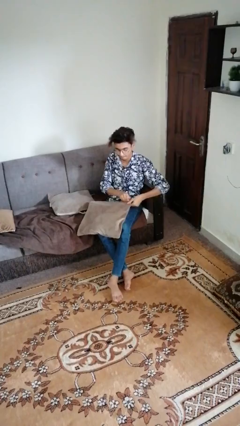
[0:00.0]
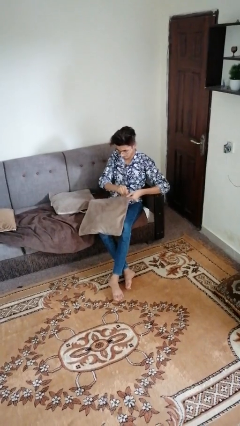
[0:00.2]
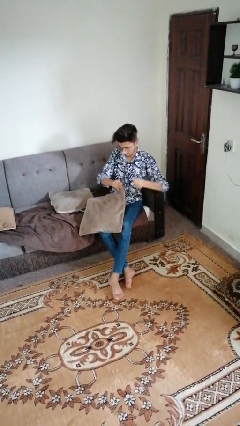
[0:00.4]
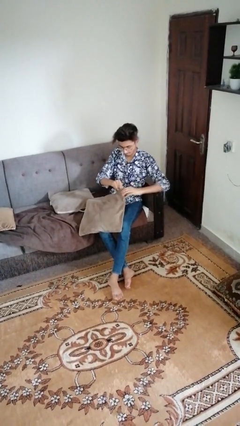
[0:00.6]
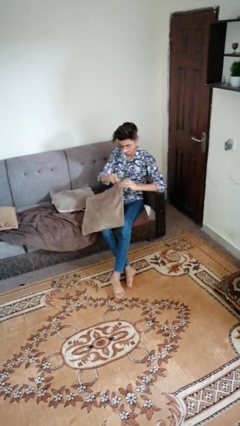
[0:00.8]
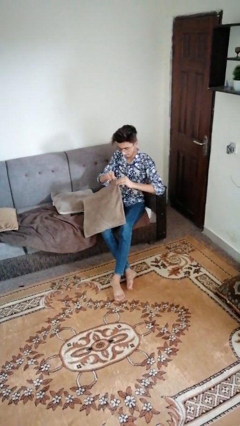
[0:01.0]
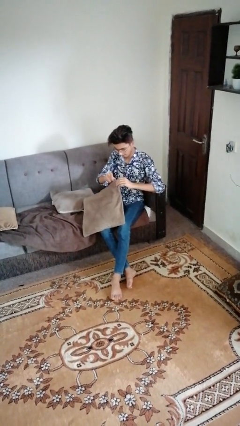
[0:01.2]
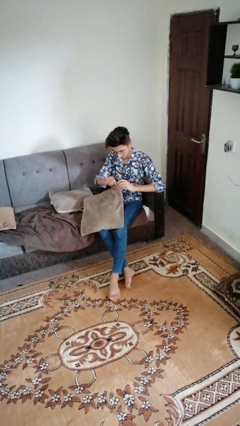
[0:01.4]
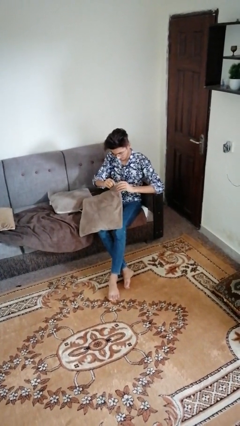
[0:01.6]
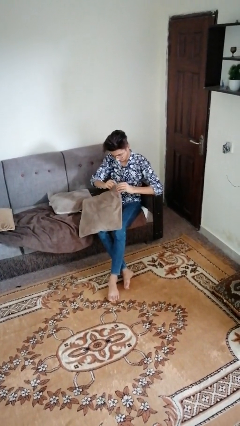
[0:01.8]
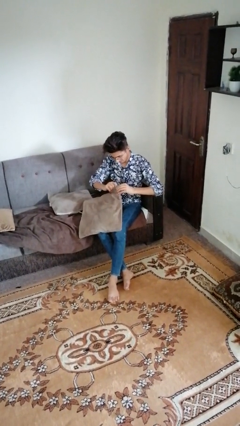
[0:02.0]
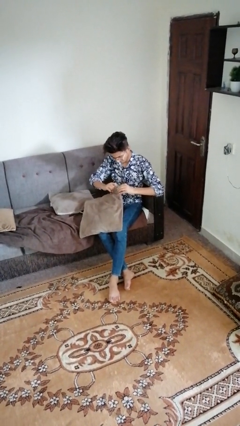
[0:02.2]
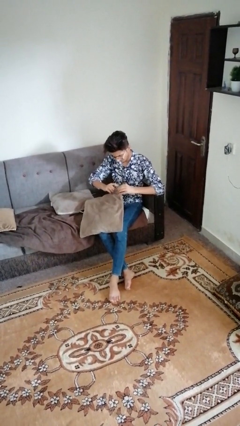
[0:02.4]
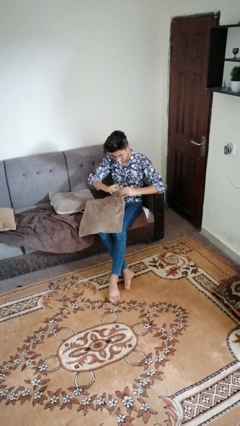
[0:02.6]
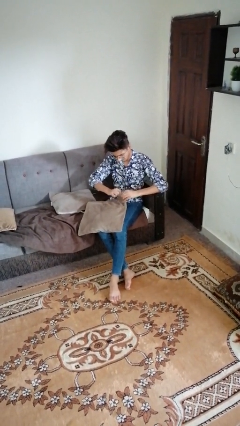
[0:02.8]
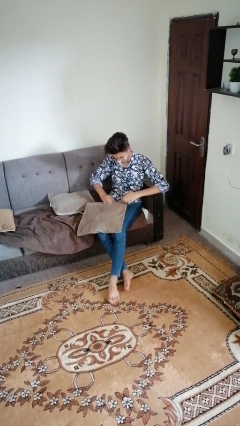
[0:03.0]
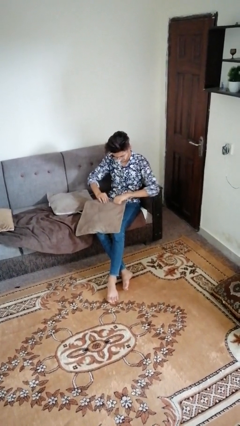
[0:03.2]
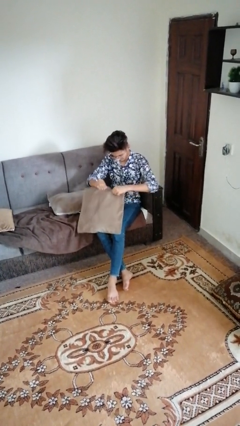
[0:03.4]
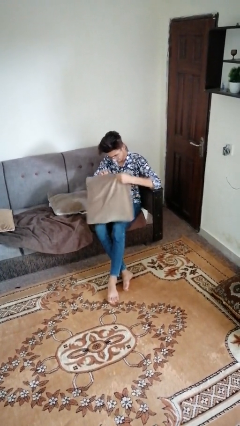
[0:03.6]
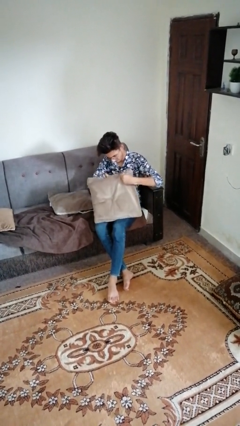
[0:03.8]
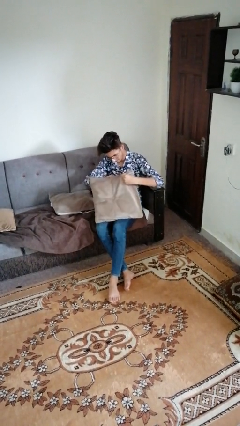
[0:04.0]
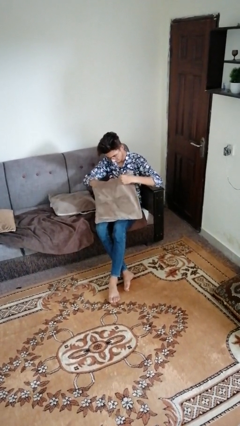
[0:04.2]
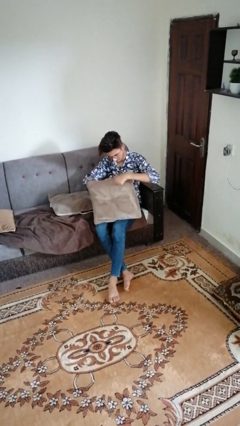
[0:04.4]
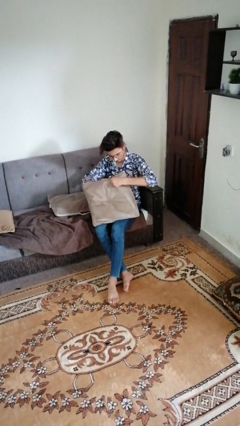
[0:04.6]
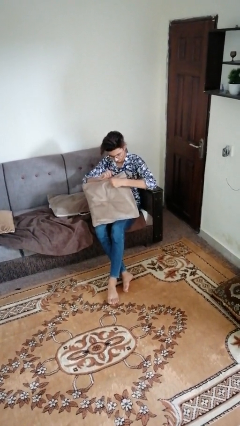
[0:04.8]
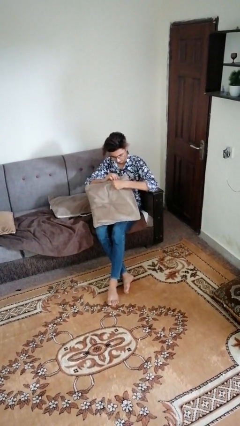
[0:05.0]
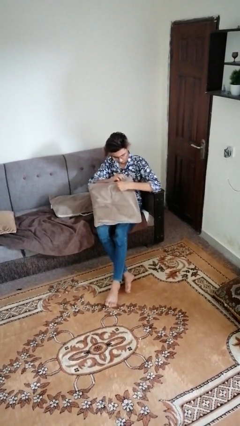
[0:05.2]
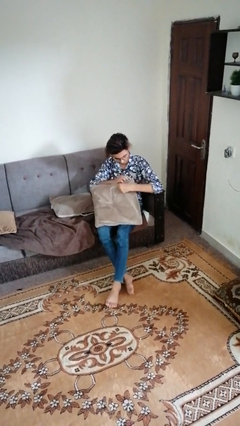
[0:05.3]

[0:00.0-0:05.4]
person searches in couch

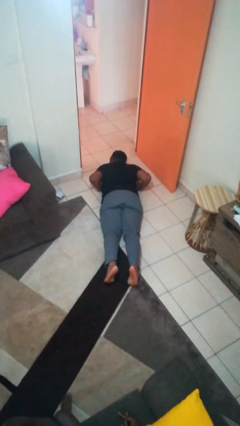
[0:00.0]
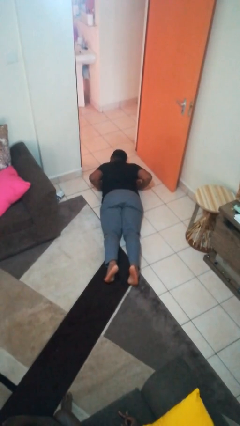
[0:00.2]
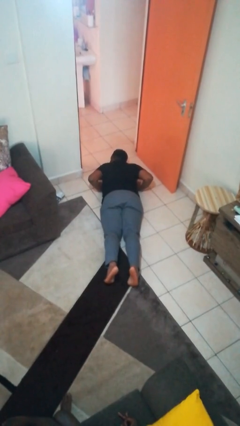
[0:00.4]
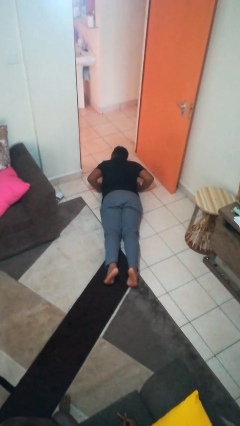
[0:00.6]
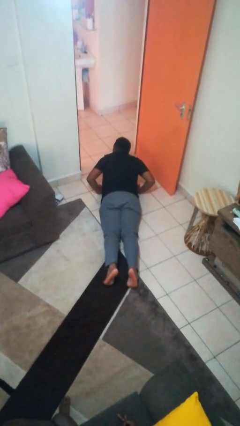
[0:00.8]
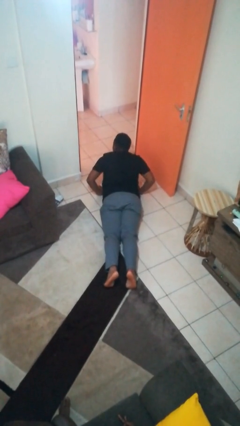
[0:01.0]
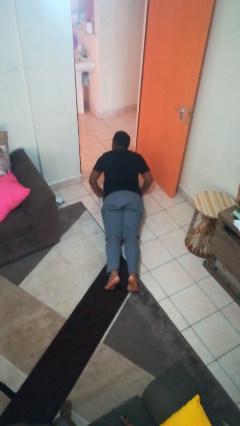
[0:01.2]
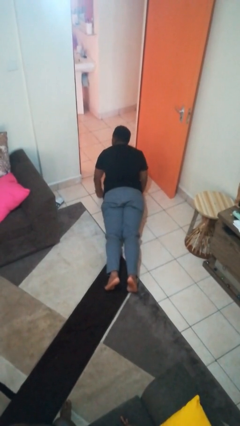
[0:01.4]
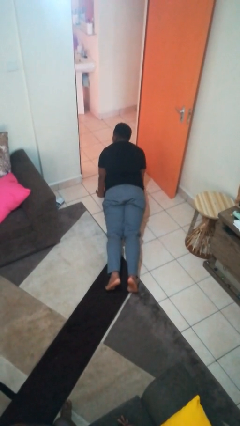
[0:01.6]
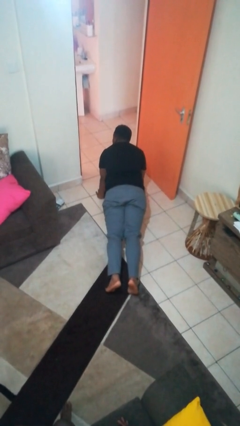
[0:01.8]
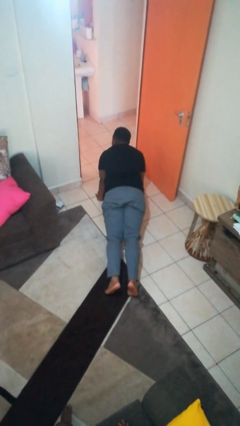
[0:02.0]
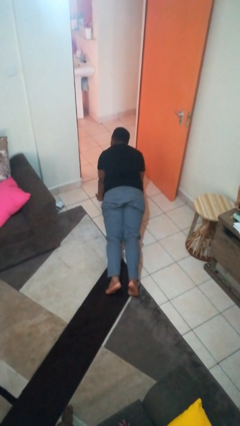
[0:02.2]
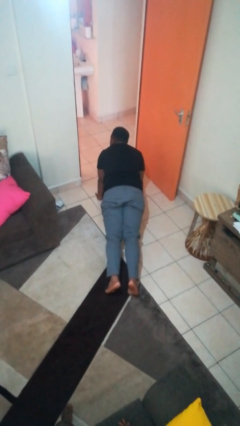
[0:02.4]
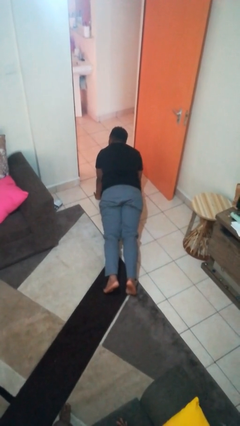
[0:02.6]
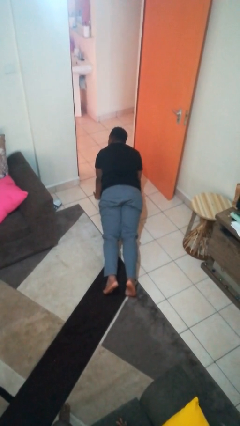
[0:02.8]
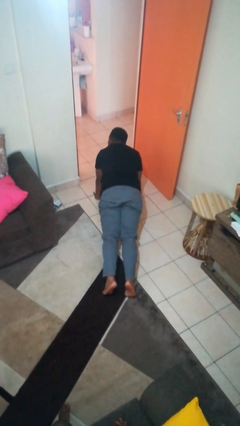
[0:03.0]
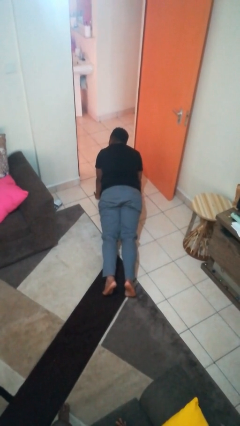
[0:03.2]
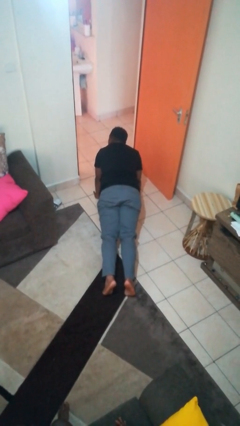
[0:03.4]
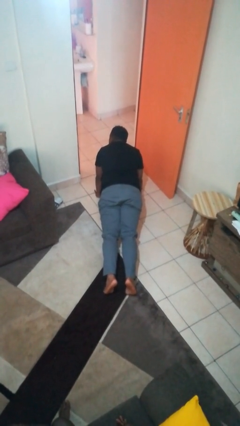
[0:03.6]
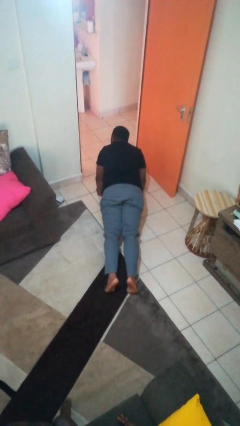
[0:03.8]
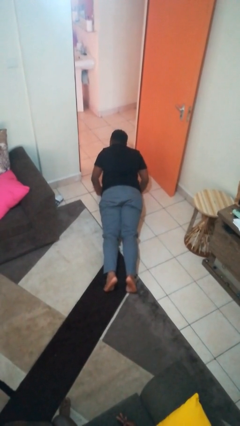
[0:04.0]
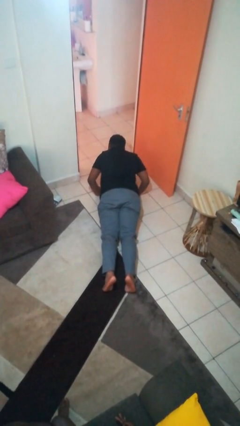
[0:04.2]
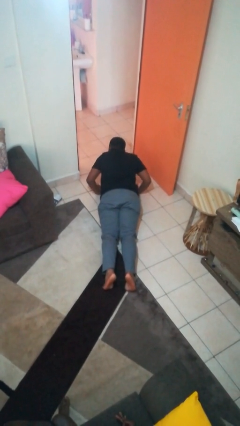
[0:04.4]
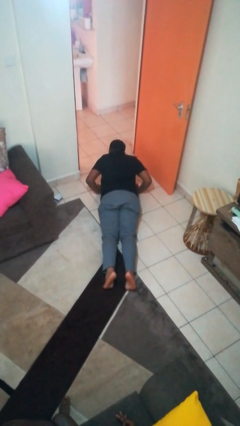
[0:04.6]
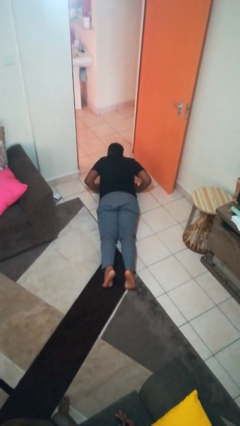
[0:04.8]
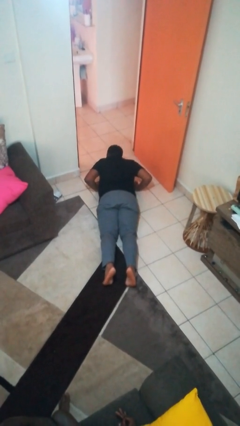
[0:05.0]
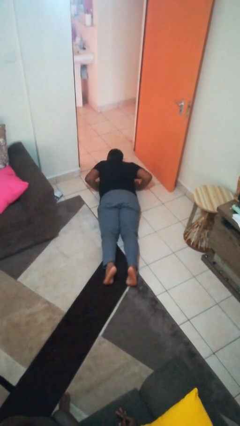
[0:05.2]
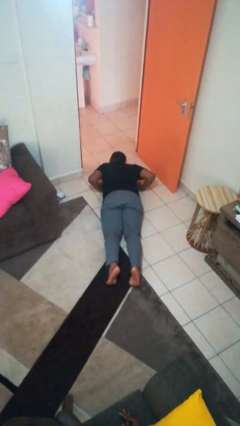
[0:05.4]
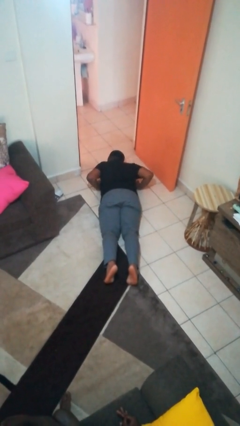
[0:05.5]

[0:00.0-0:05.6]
person exercises with pushup

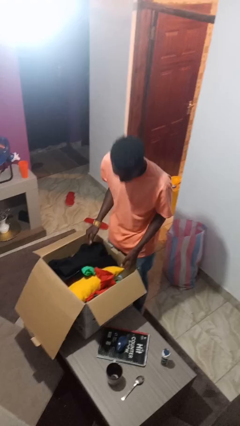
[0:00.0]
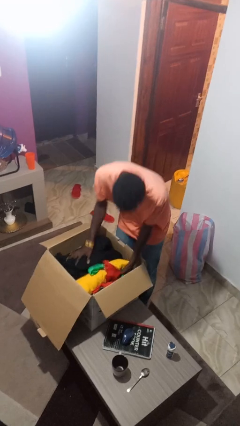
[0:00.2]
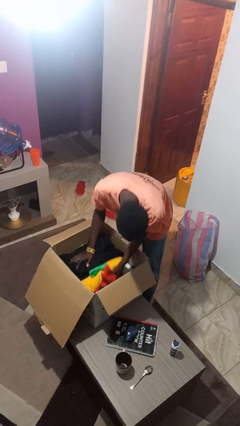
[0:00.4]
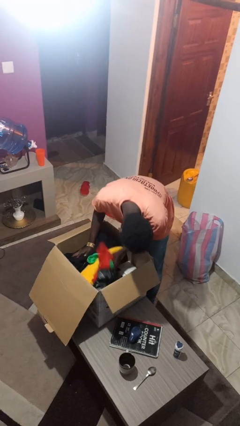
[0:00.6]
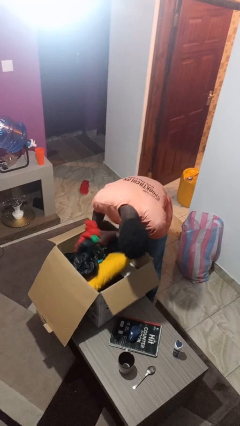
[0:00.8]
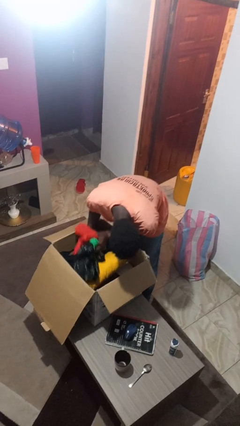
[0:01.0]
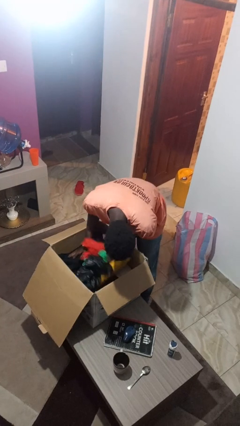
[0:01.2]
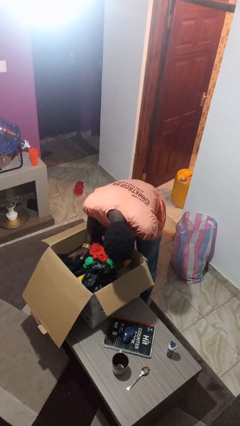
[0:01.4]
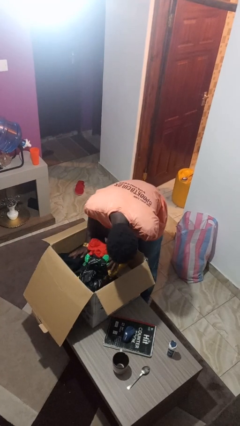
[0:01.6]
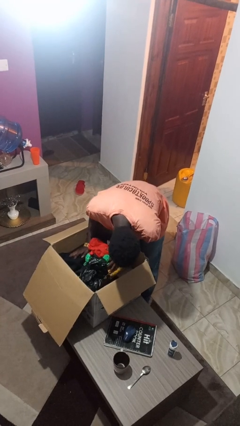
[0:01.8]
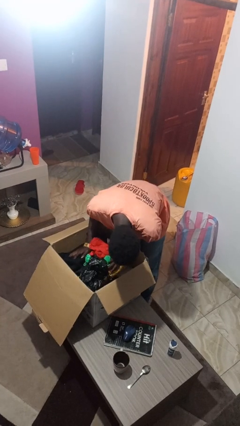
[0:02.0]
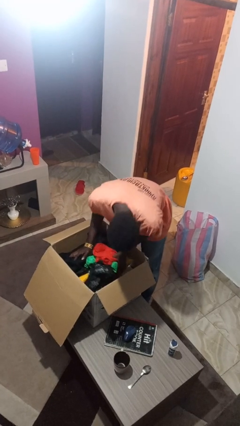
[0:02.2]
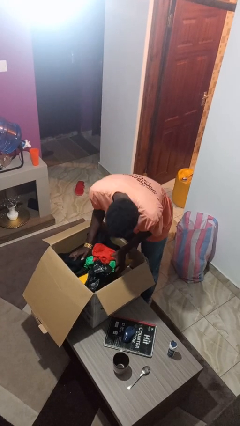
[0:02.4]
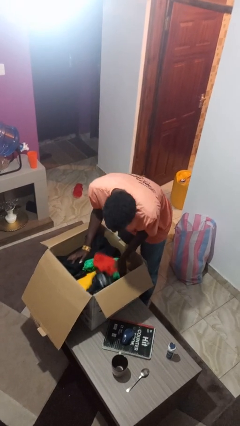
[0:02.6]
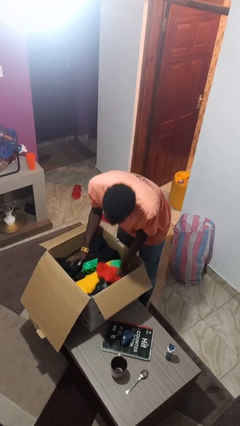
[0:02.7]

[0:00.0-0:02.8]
person searches in box

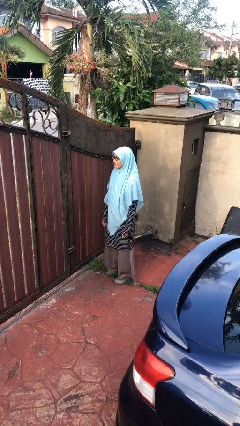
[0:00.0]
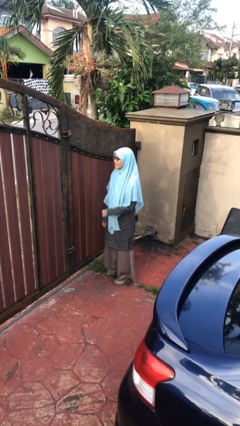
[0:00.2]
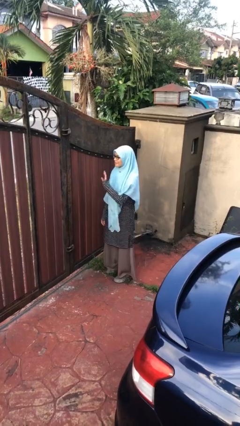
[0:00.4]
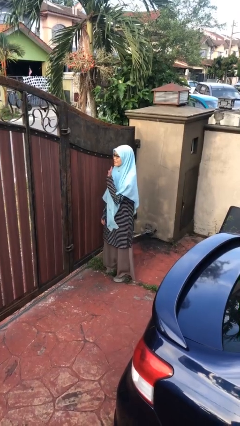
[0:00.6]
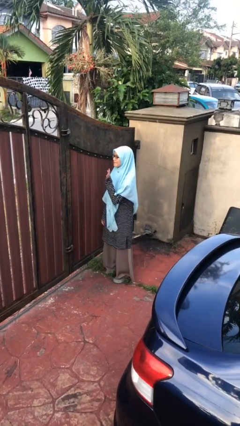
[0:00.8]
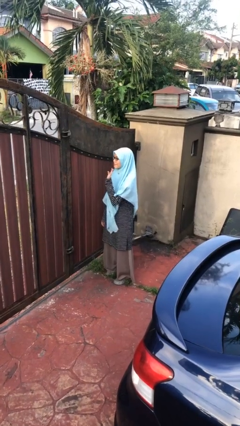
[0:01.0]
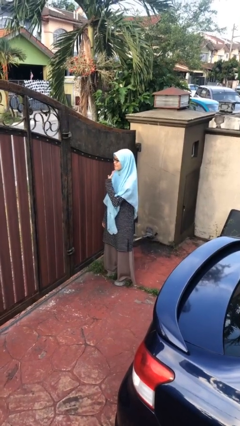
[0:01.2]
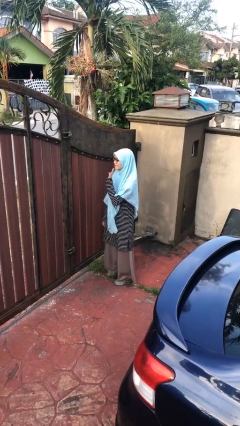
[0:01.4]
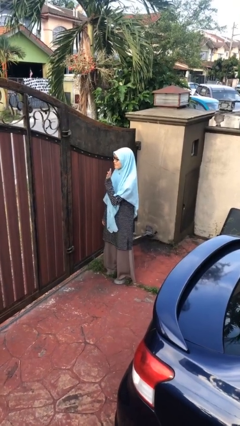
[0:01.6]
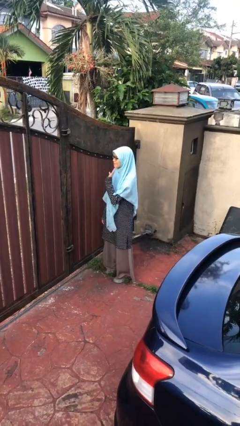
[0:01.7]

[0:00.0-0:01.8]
person waves at person

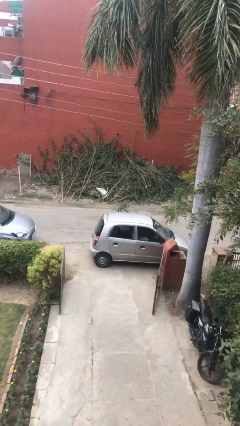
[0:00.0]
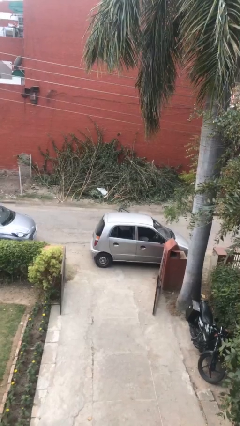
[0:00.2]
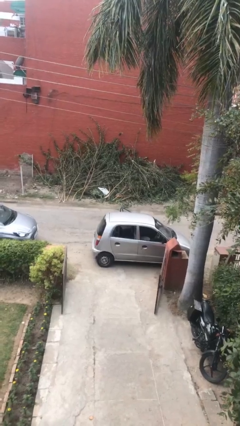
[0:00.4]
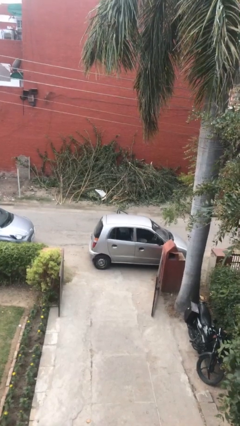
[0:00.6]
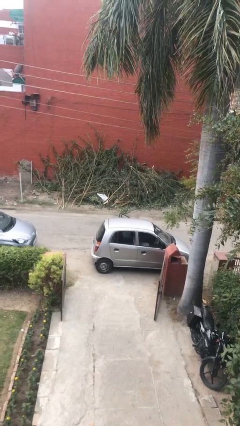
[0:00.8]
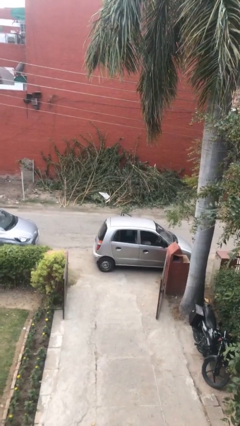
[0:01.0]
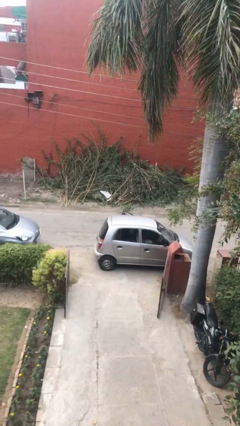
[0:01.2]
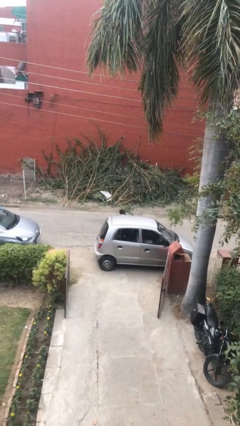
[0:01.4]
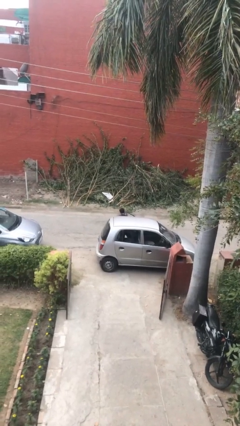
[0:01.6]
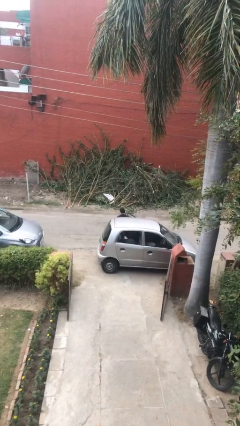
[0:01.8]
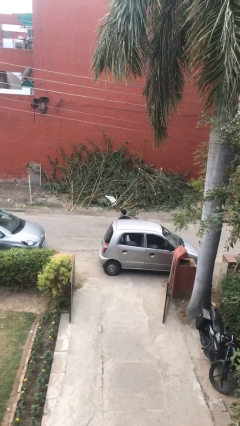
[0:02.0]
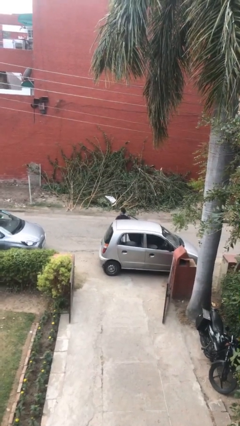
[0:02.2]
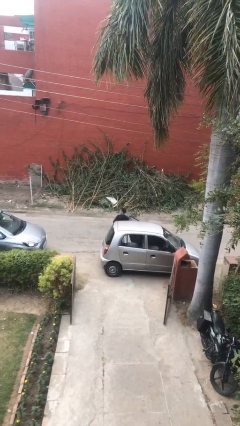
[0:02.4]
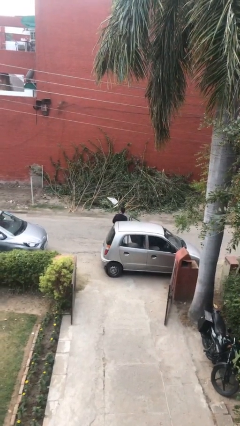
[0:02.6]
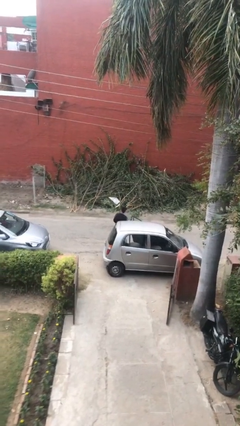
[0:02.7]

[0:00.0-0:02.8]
person exits car
